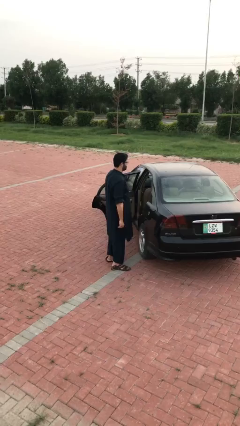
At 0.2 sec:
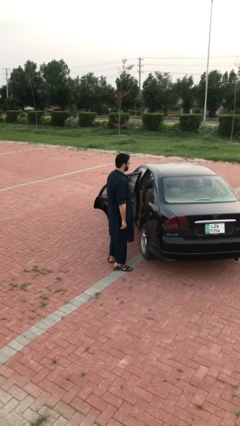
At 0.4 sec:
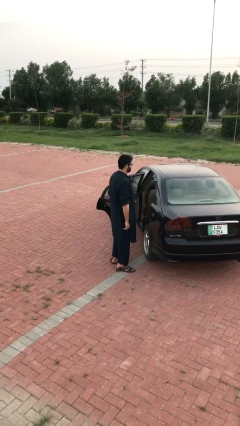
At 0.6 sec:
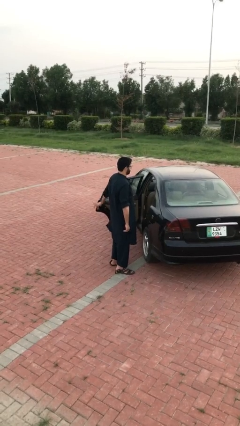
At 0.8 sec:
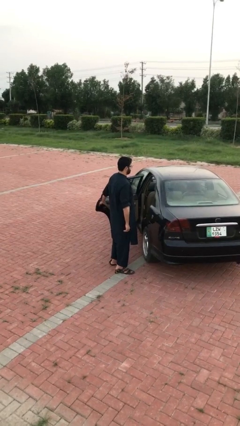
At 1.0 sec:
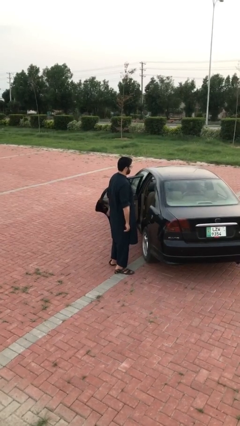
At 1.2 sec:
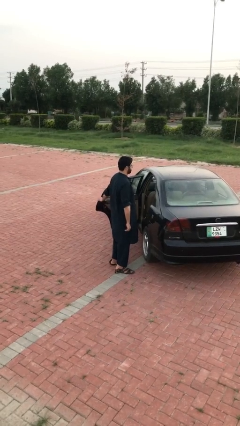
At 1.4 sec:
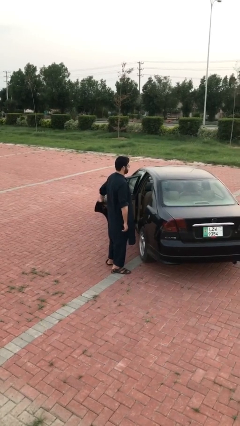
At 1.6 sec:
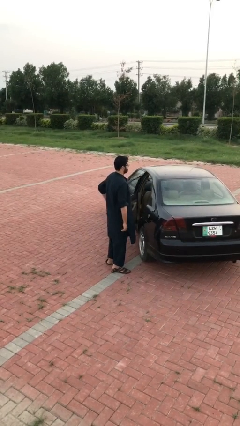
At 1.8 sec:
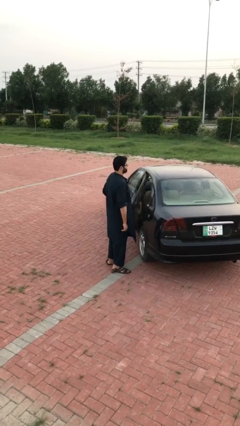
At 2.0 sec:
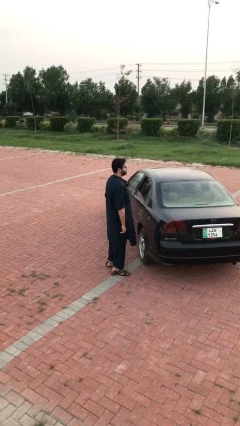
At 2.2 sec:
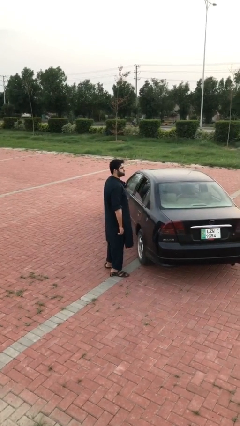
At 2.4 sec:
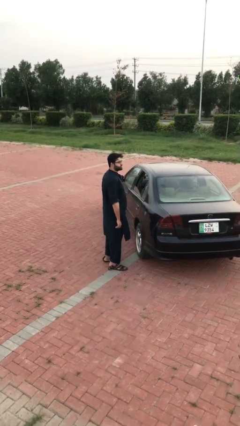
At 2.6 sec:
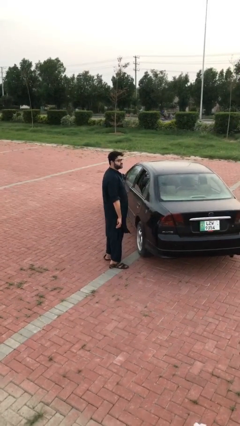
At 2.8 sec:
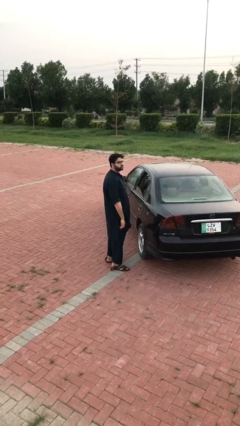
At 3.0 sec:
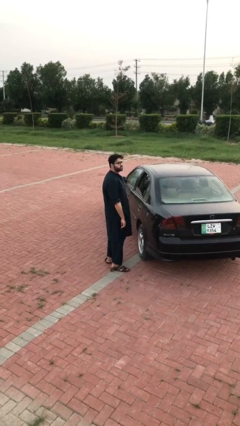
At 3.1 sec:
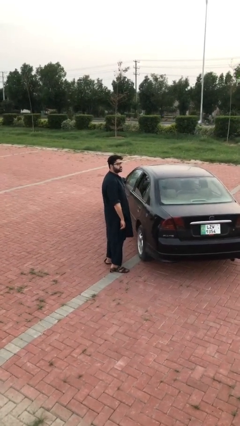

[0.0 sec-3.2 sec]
person closes car door

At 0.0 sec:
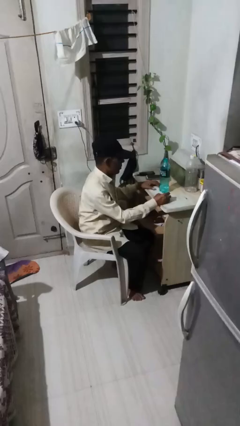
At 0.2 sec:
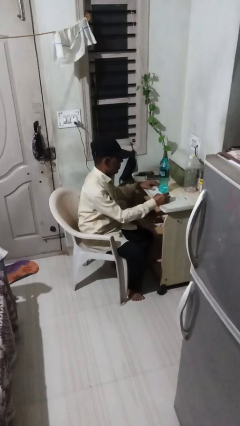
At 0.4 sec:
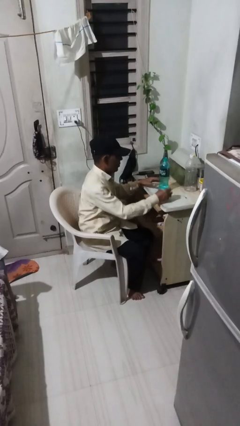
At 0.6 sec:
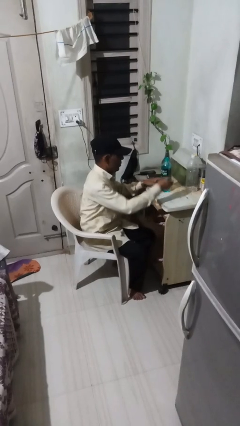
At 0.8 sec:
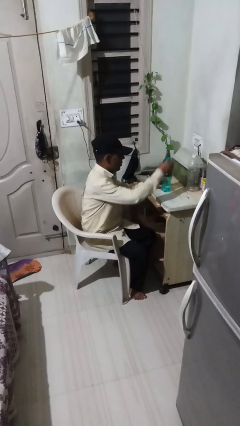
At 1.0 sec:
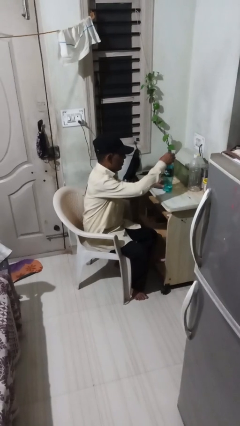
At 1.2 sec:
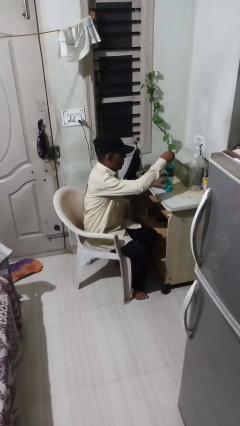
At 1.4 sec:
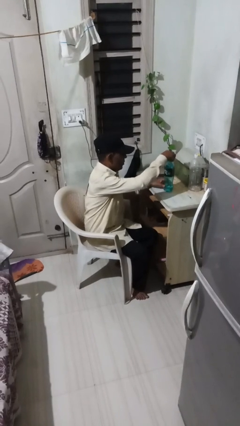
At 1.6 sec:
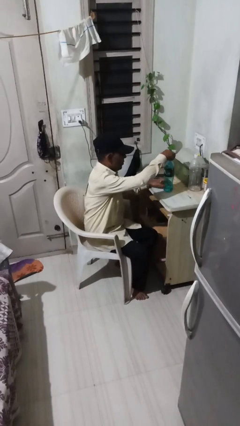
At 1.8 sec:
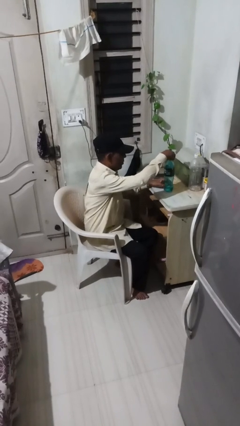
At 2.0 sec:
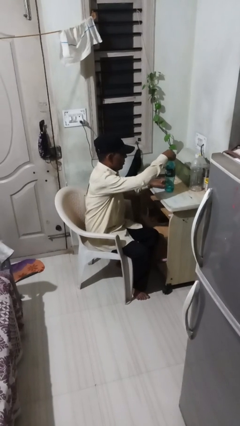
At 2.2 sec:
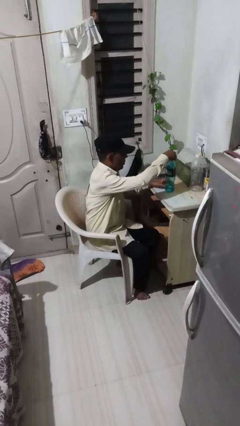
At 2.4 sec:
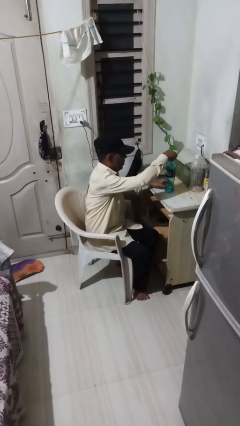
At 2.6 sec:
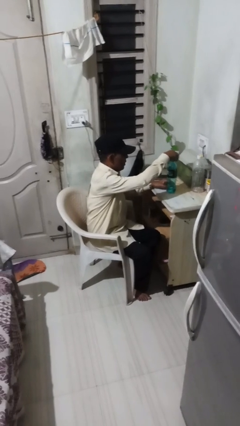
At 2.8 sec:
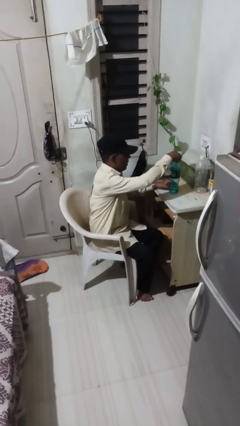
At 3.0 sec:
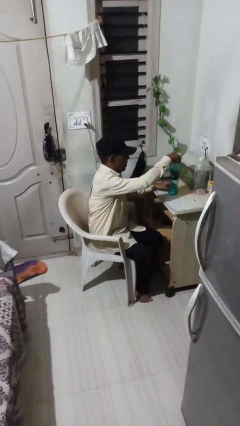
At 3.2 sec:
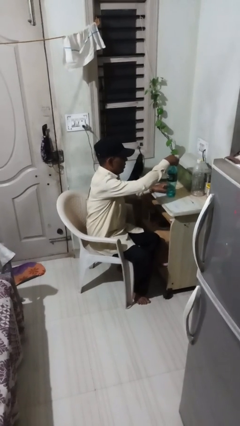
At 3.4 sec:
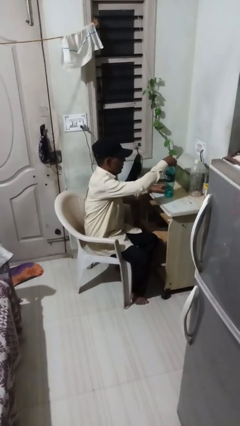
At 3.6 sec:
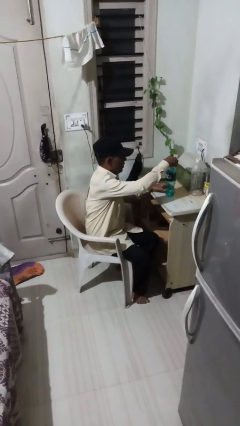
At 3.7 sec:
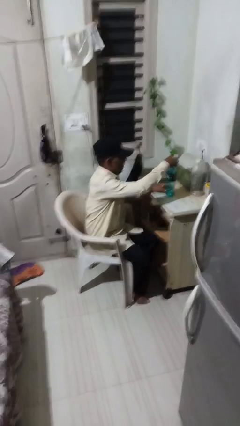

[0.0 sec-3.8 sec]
person unscrews lid from bottle

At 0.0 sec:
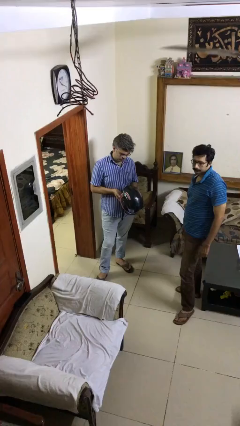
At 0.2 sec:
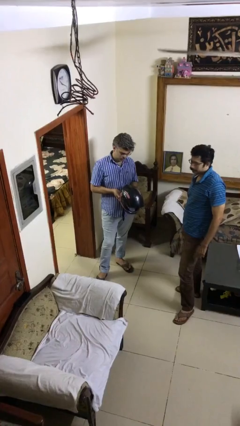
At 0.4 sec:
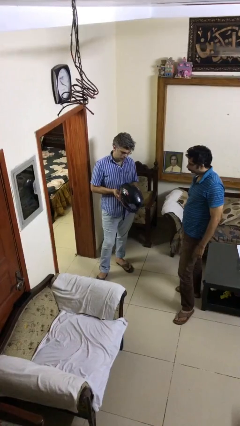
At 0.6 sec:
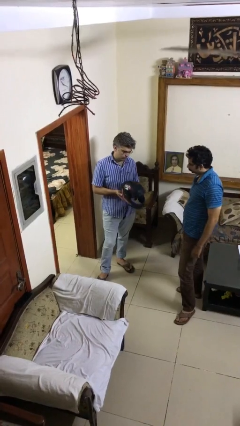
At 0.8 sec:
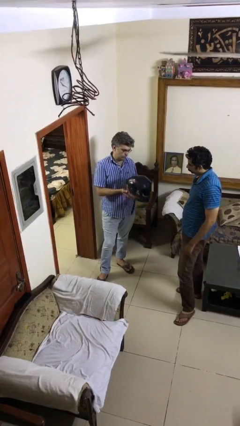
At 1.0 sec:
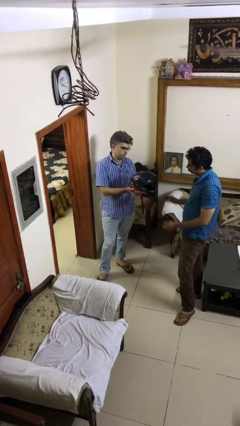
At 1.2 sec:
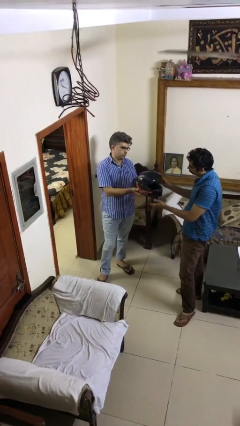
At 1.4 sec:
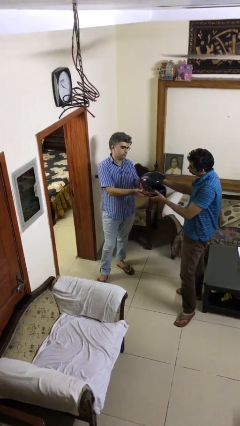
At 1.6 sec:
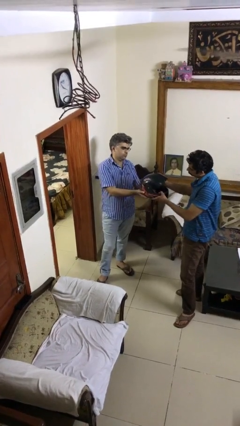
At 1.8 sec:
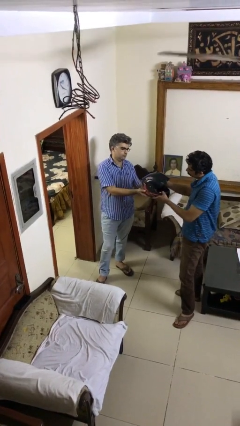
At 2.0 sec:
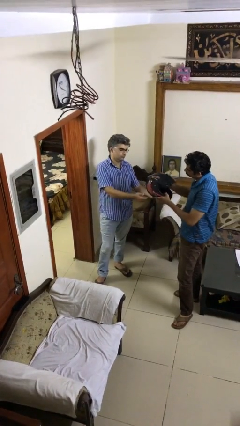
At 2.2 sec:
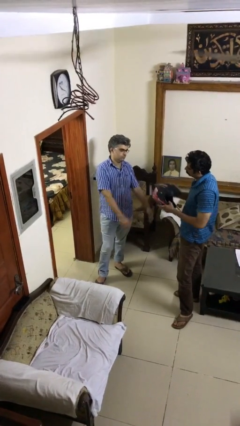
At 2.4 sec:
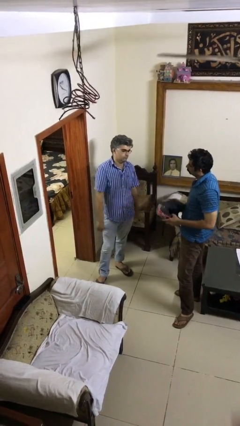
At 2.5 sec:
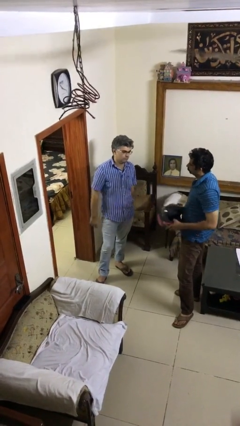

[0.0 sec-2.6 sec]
person transfers object to person

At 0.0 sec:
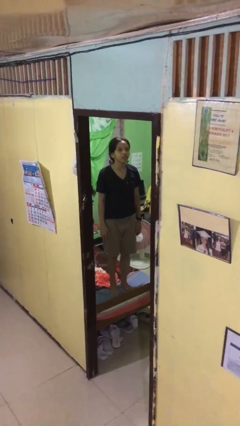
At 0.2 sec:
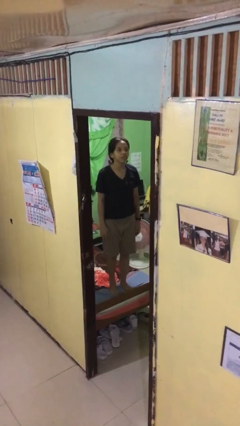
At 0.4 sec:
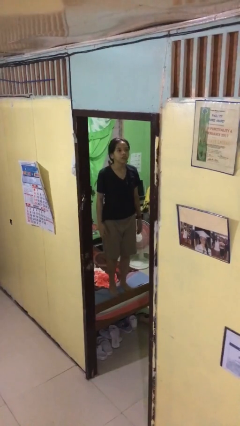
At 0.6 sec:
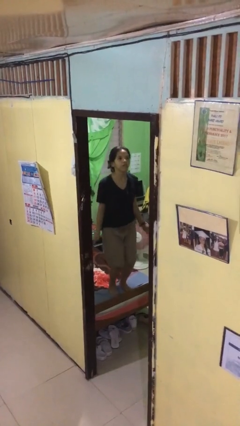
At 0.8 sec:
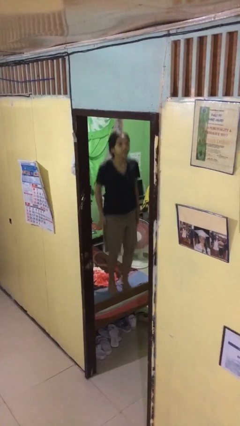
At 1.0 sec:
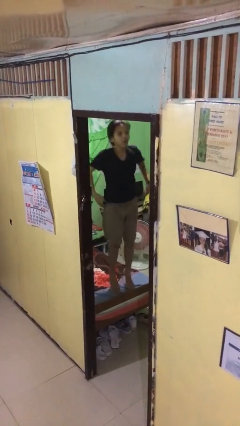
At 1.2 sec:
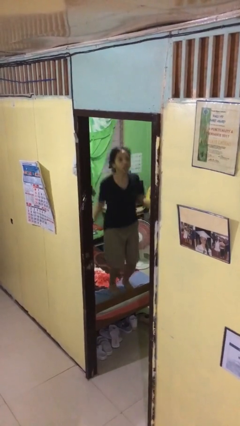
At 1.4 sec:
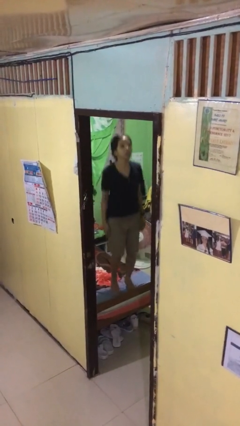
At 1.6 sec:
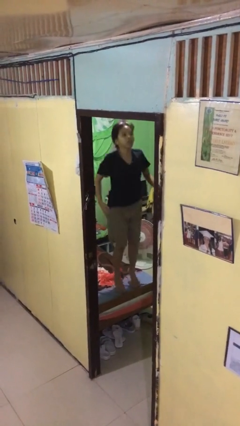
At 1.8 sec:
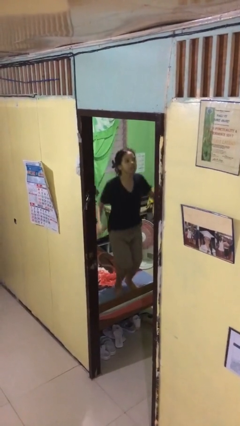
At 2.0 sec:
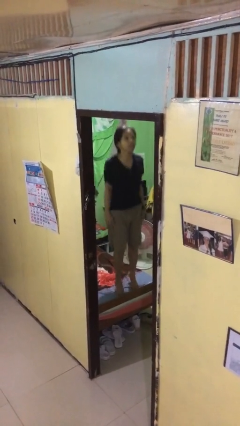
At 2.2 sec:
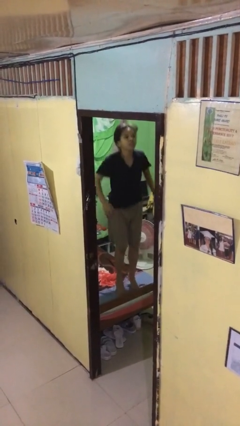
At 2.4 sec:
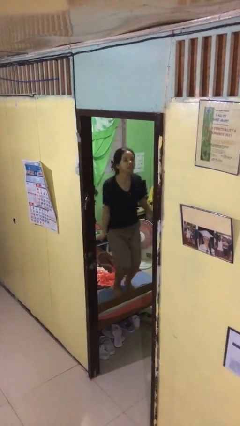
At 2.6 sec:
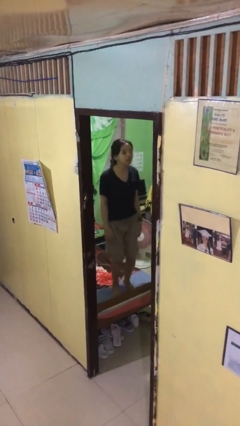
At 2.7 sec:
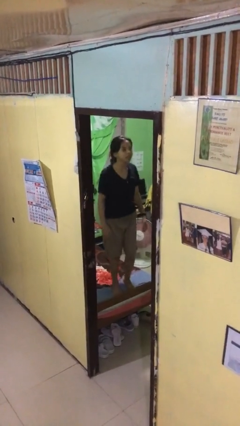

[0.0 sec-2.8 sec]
person jumps on bed

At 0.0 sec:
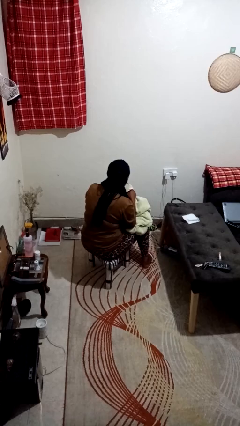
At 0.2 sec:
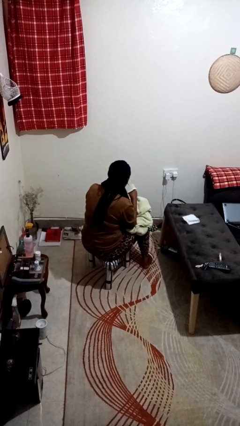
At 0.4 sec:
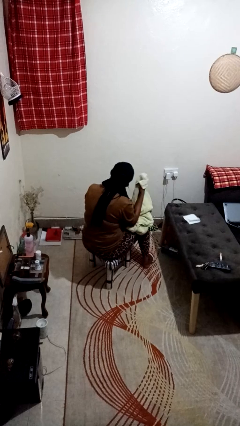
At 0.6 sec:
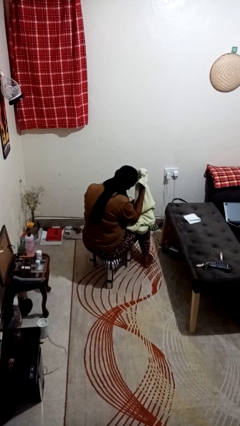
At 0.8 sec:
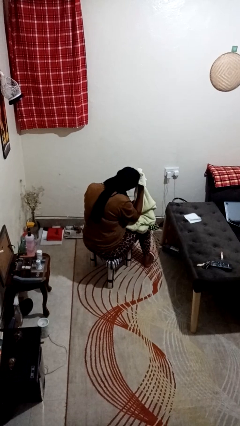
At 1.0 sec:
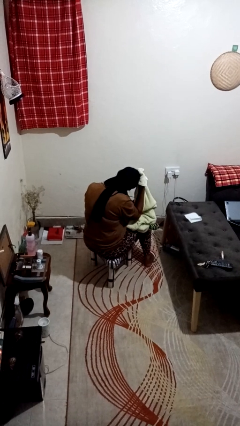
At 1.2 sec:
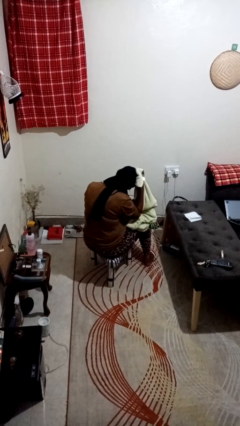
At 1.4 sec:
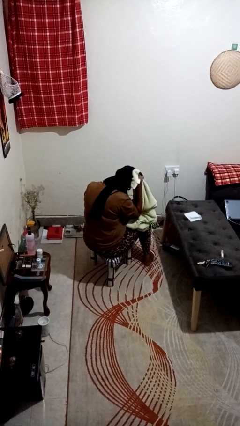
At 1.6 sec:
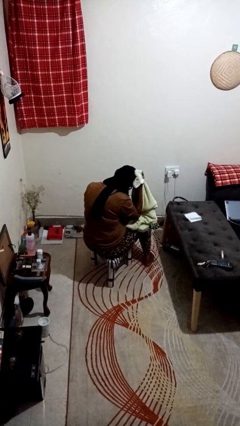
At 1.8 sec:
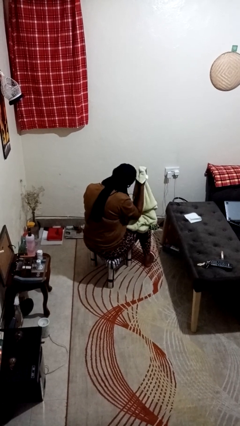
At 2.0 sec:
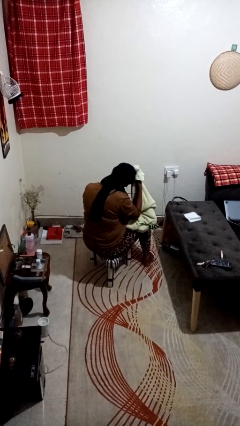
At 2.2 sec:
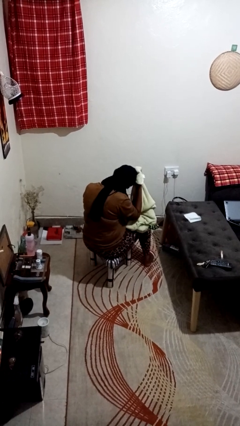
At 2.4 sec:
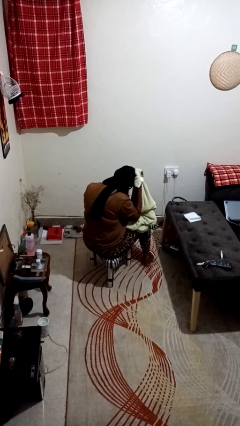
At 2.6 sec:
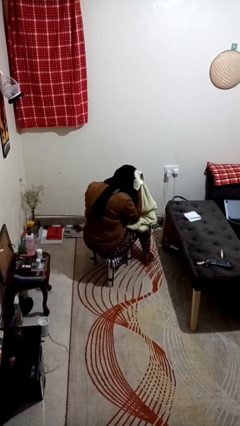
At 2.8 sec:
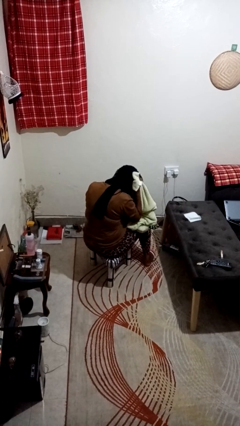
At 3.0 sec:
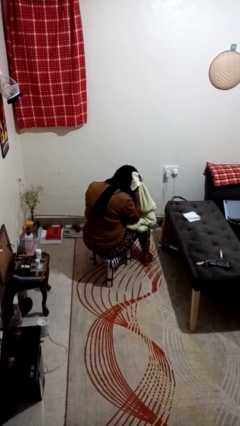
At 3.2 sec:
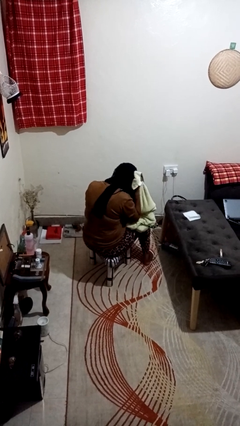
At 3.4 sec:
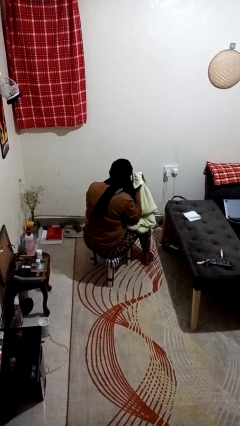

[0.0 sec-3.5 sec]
person dries hair with towel

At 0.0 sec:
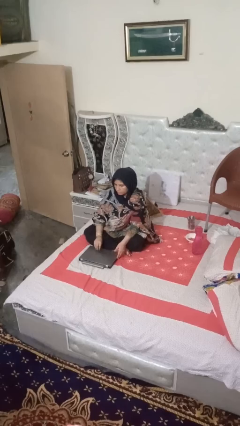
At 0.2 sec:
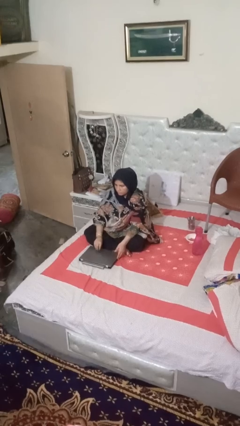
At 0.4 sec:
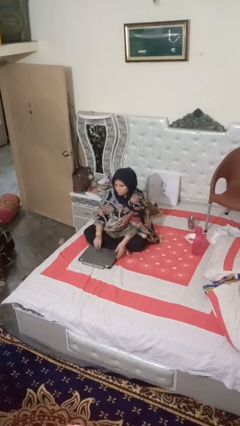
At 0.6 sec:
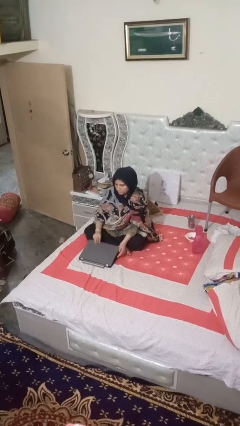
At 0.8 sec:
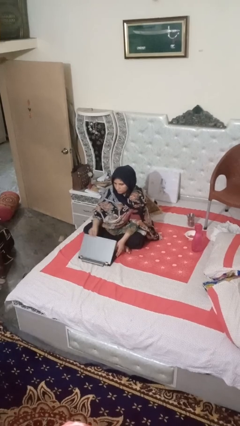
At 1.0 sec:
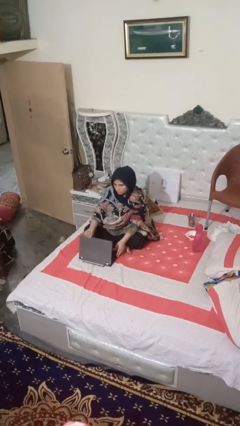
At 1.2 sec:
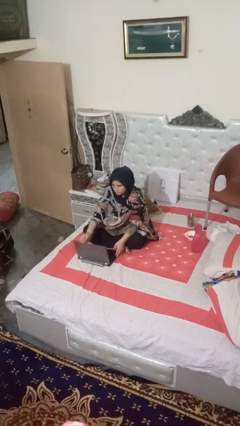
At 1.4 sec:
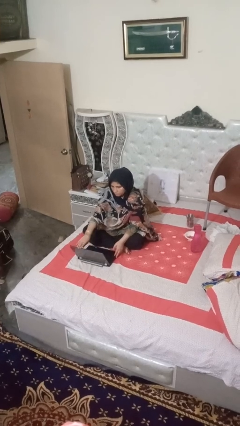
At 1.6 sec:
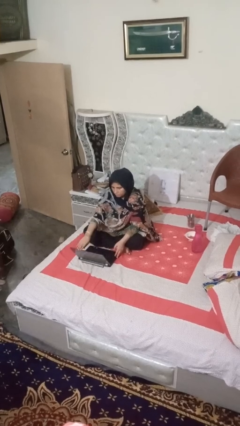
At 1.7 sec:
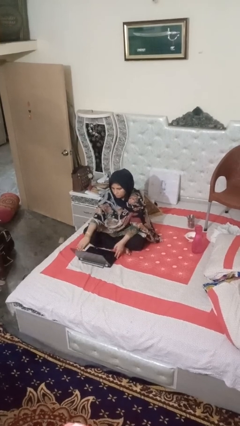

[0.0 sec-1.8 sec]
person opens laptop
